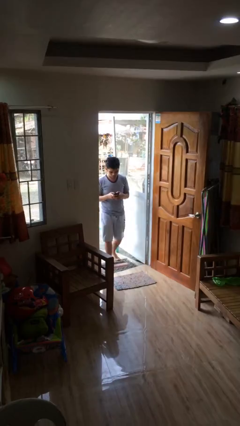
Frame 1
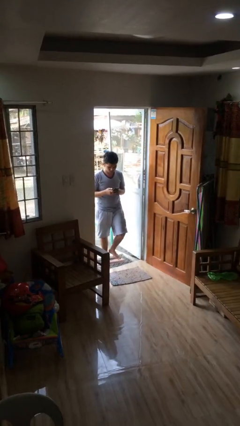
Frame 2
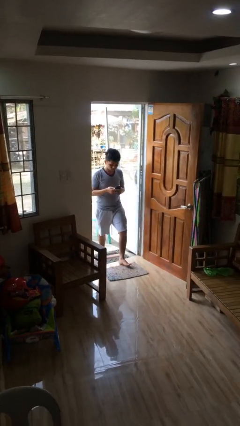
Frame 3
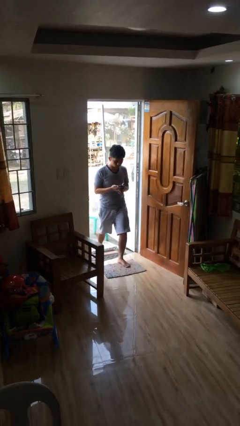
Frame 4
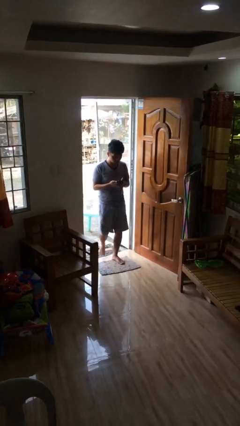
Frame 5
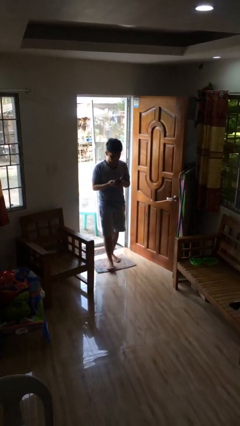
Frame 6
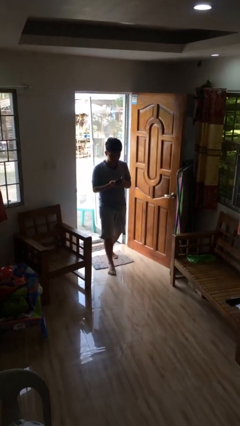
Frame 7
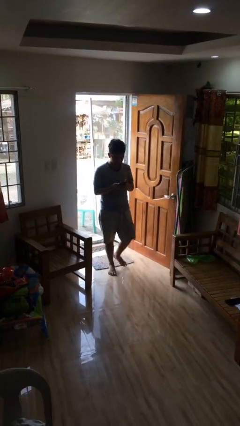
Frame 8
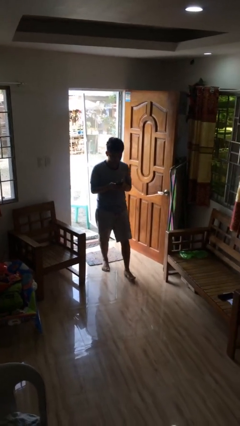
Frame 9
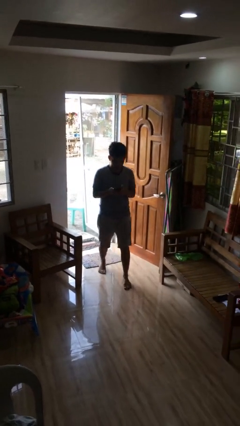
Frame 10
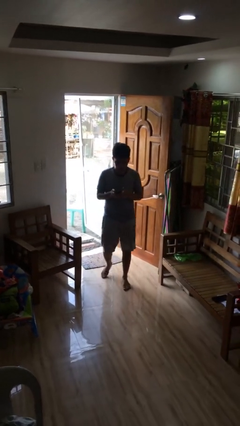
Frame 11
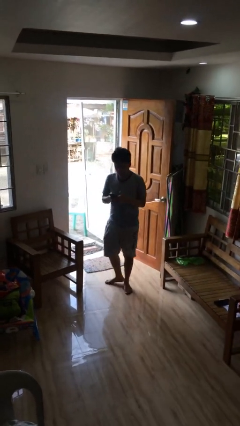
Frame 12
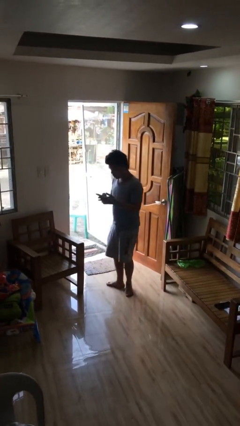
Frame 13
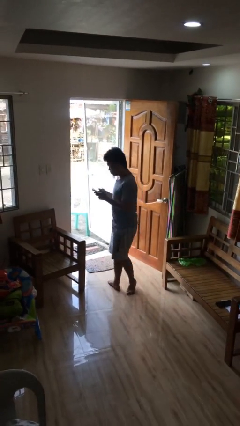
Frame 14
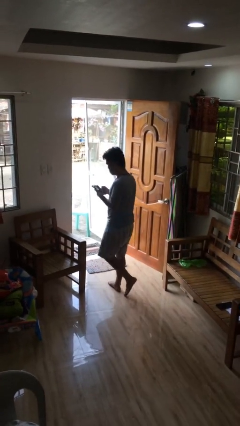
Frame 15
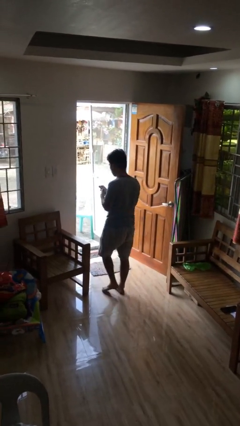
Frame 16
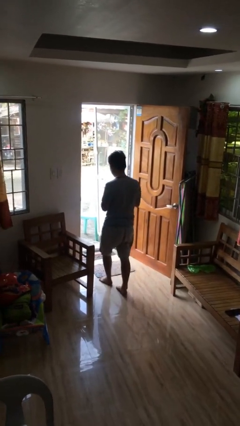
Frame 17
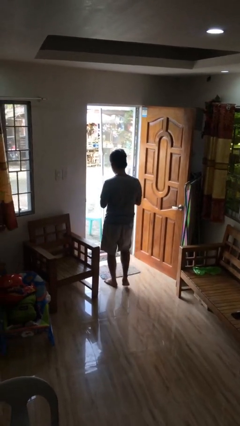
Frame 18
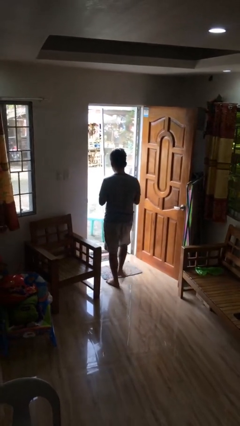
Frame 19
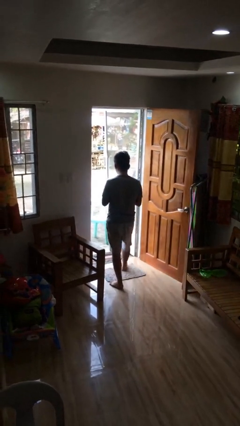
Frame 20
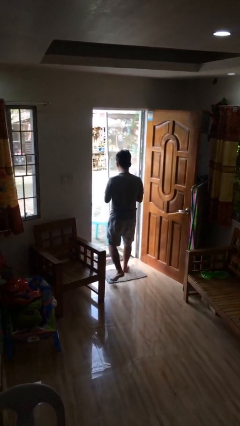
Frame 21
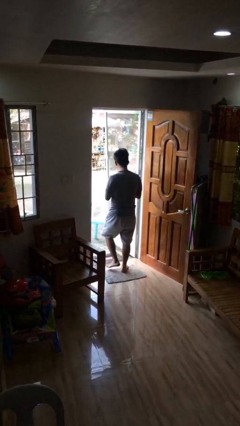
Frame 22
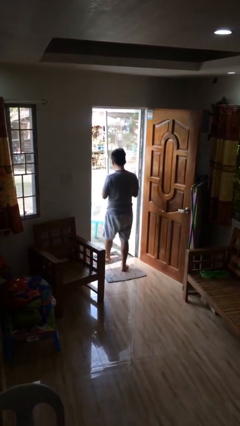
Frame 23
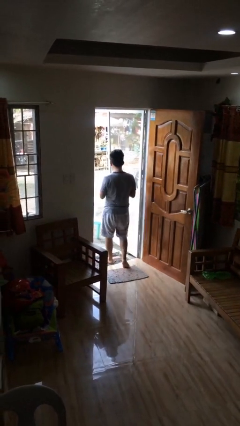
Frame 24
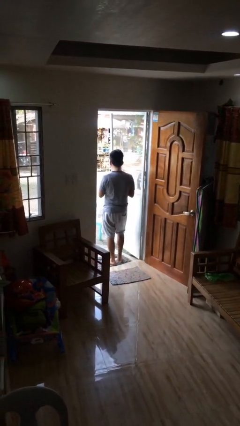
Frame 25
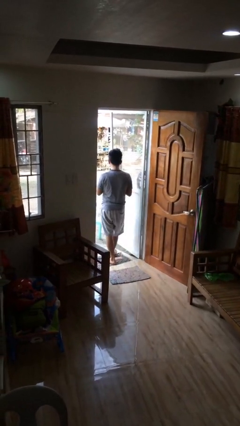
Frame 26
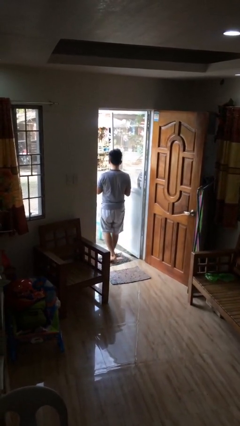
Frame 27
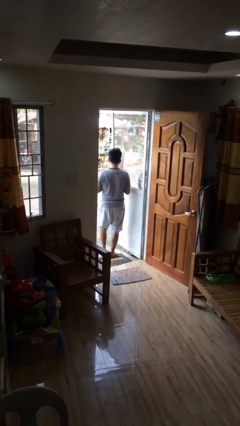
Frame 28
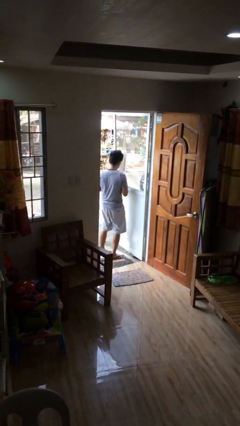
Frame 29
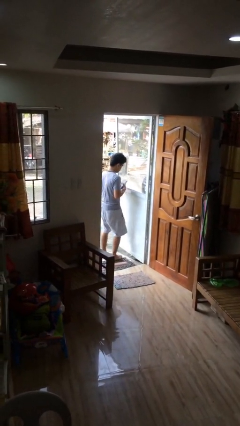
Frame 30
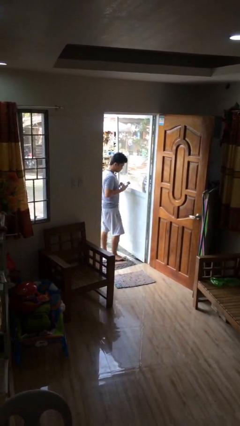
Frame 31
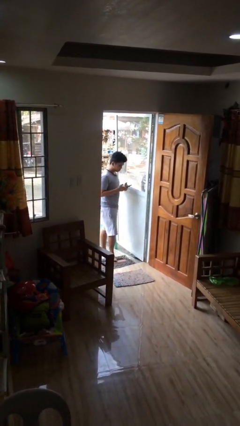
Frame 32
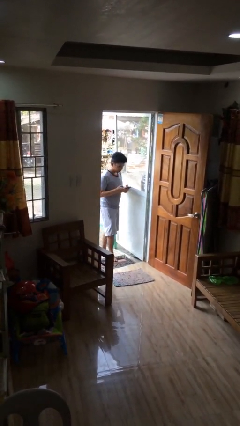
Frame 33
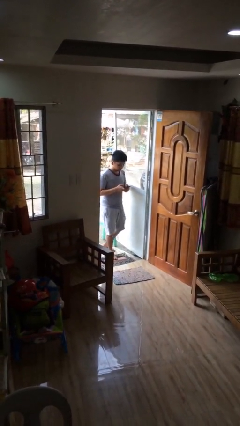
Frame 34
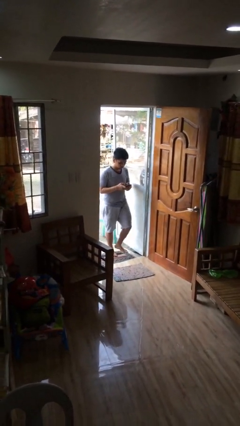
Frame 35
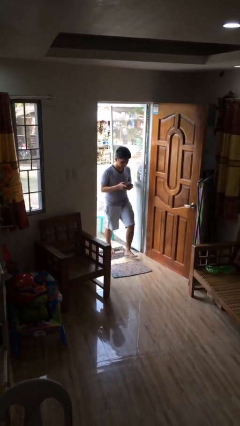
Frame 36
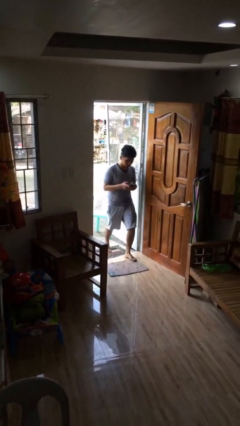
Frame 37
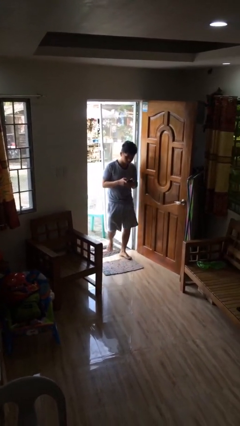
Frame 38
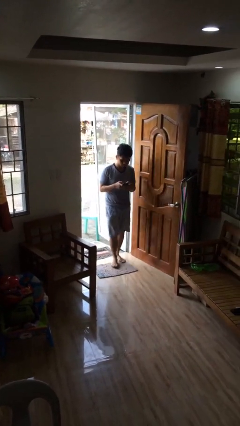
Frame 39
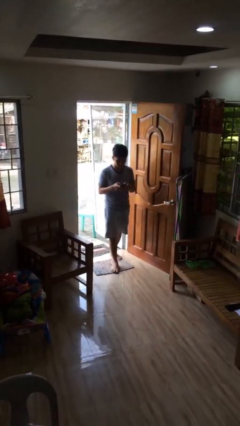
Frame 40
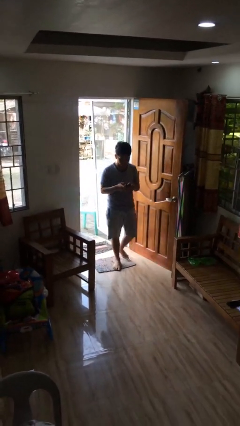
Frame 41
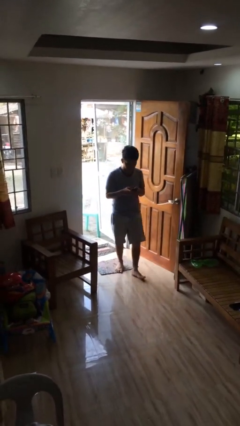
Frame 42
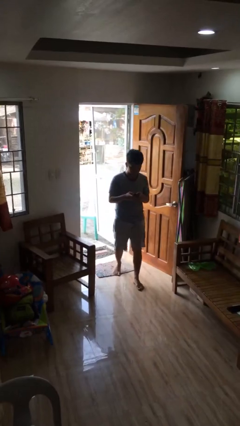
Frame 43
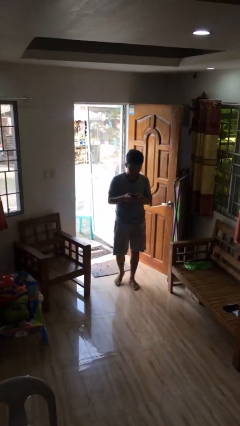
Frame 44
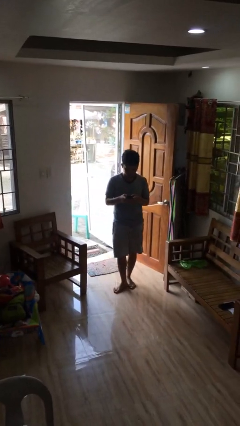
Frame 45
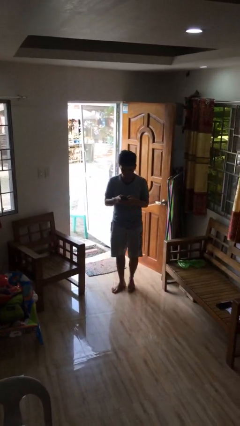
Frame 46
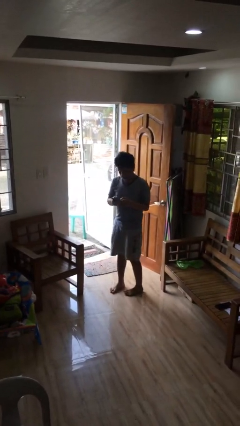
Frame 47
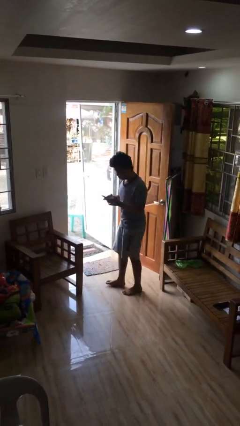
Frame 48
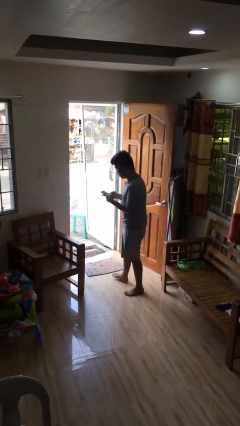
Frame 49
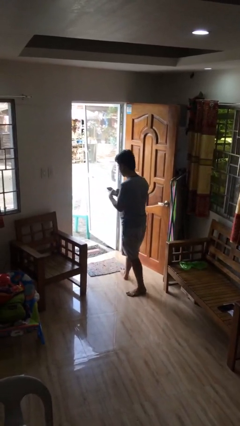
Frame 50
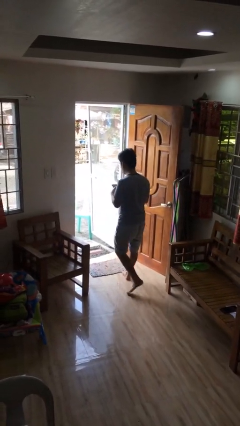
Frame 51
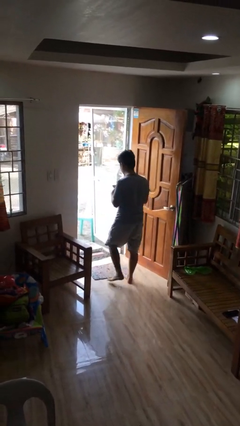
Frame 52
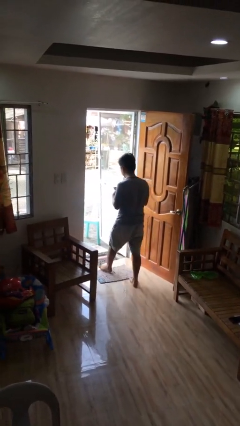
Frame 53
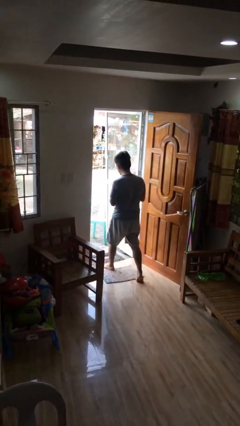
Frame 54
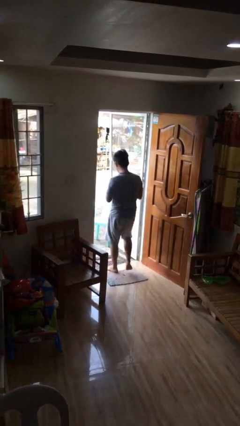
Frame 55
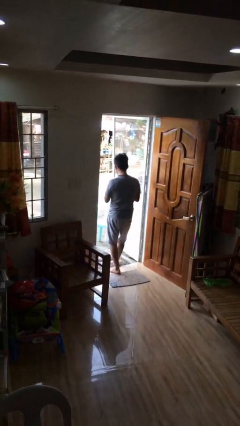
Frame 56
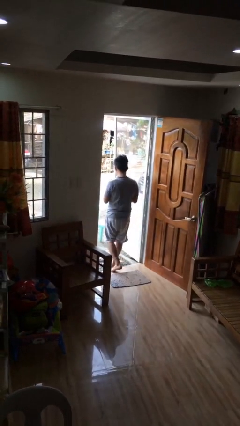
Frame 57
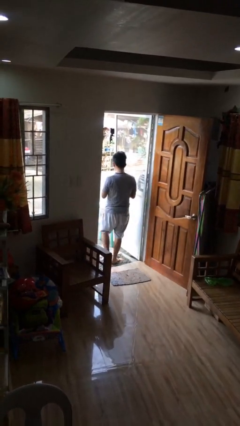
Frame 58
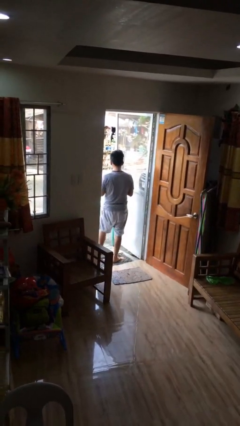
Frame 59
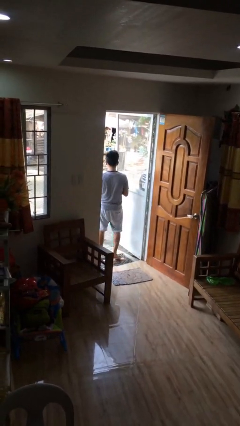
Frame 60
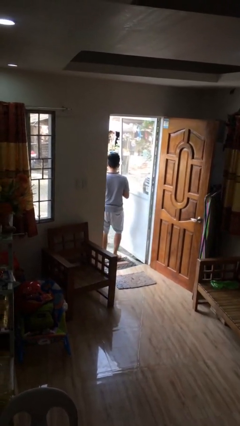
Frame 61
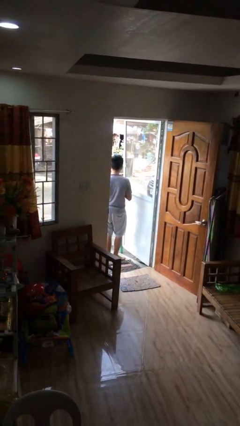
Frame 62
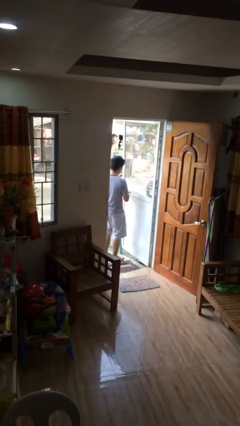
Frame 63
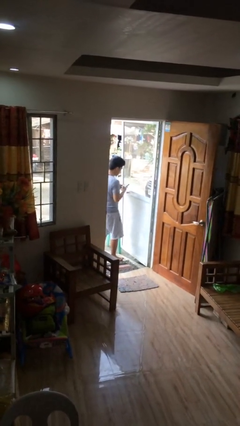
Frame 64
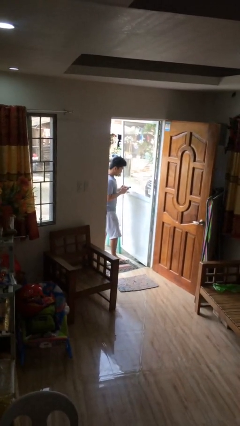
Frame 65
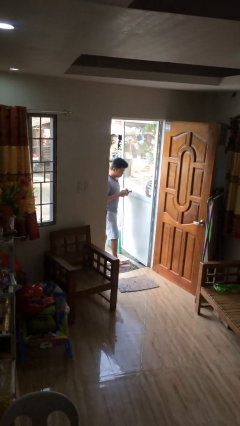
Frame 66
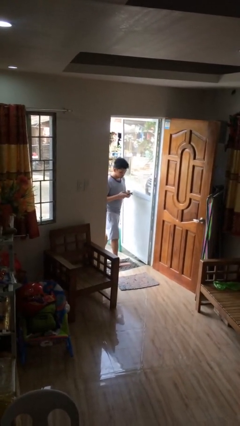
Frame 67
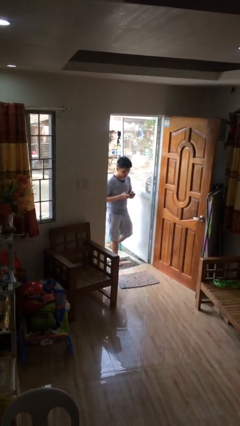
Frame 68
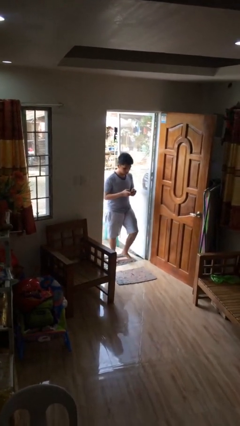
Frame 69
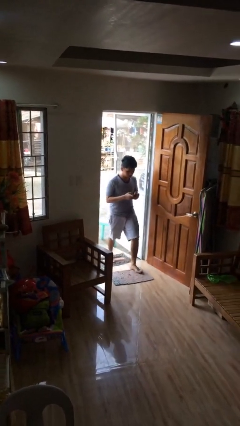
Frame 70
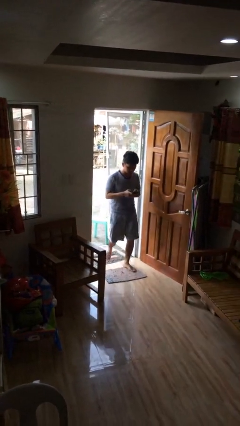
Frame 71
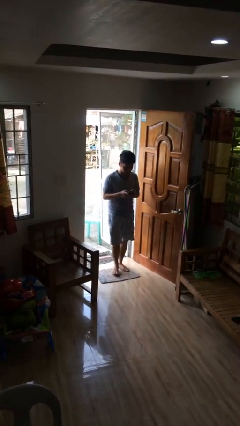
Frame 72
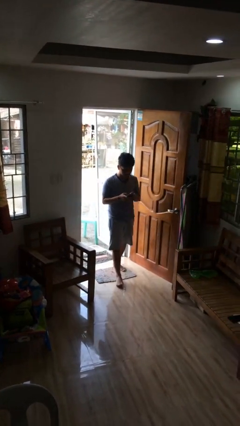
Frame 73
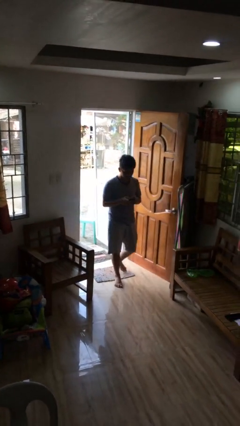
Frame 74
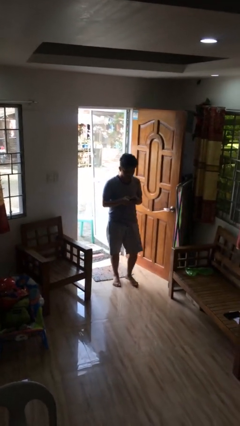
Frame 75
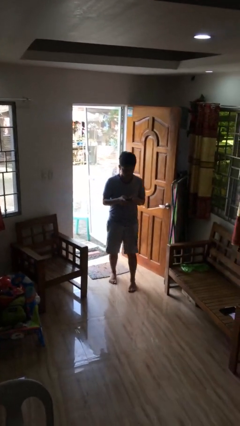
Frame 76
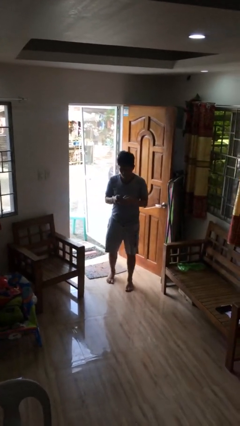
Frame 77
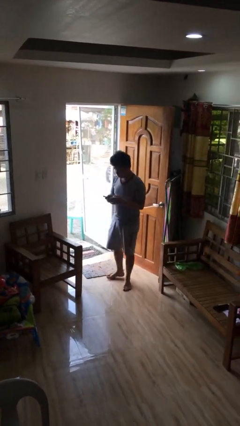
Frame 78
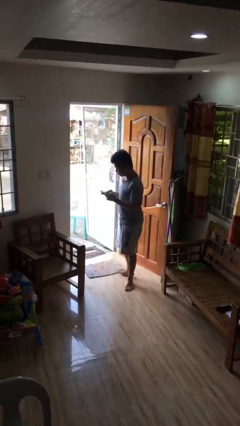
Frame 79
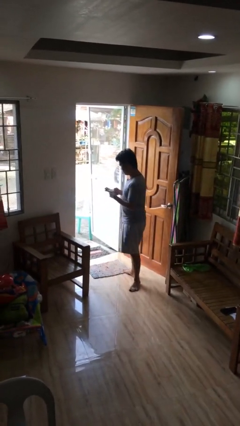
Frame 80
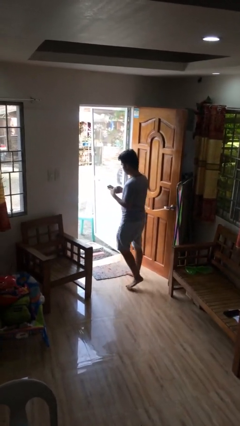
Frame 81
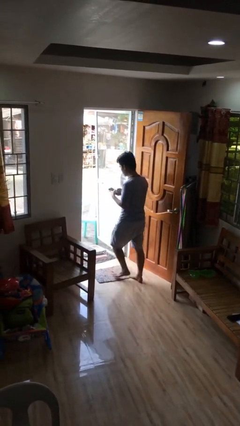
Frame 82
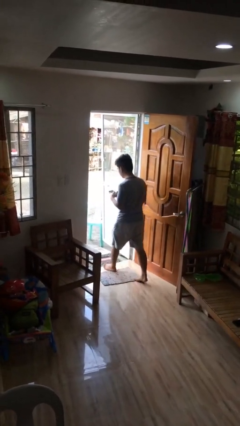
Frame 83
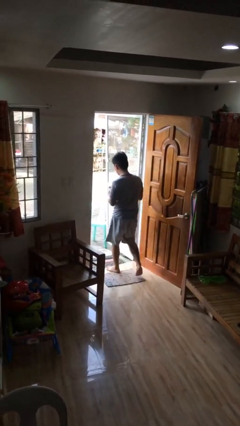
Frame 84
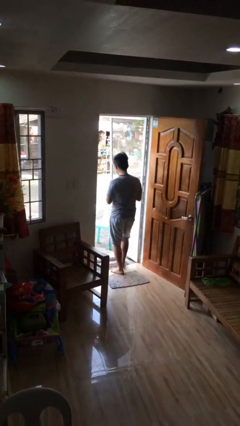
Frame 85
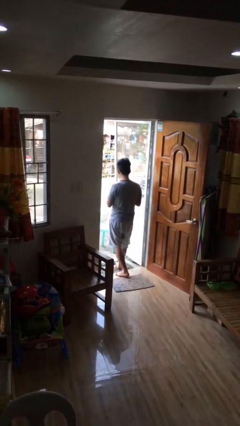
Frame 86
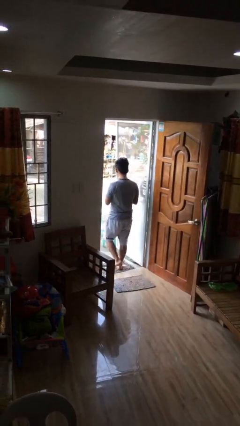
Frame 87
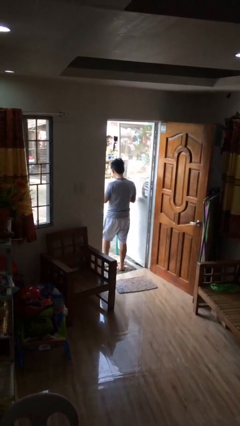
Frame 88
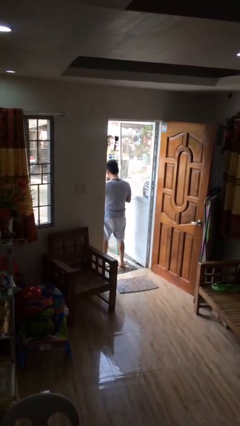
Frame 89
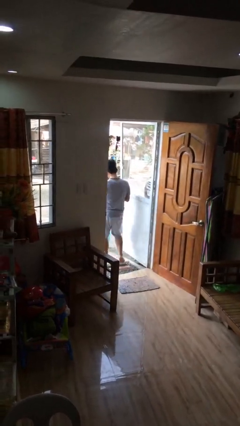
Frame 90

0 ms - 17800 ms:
person texts on phone

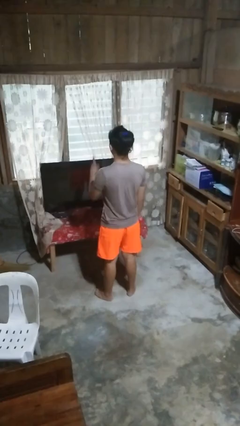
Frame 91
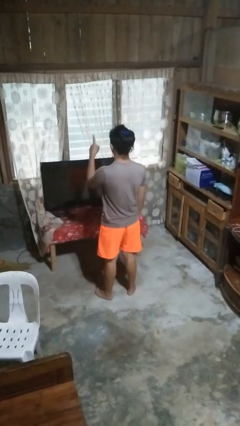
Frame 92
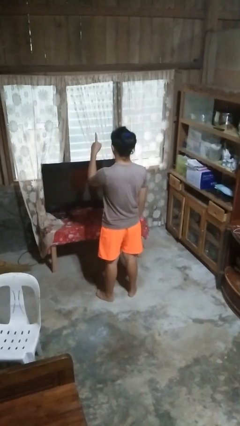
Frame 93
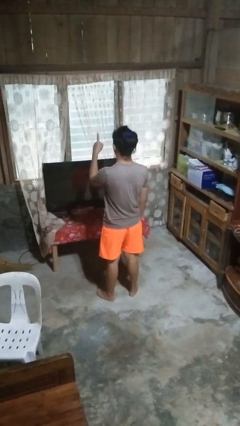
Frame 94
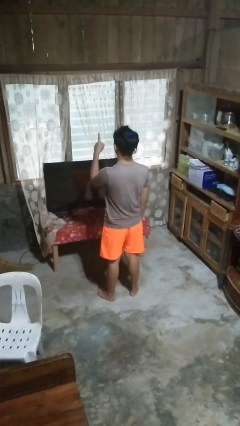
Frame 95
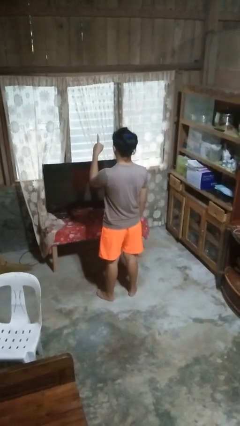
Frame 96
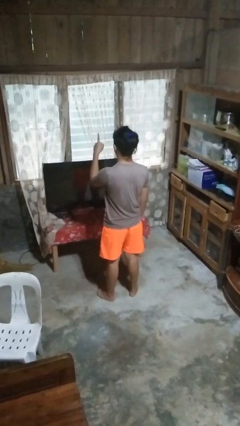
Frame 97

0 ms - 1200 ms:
person gestures number one
